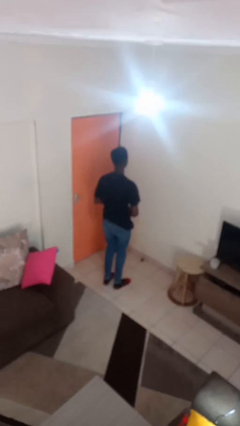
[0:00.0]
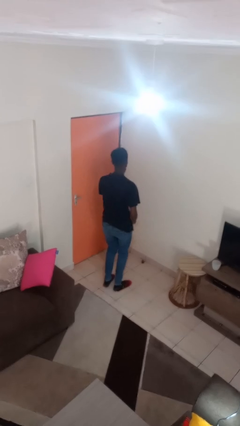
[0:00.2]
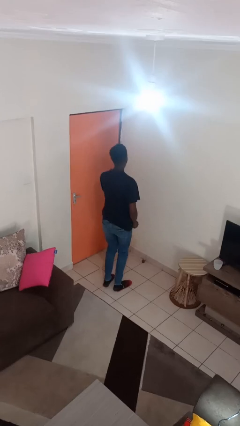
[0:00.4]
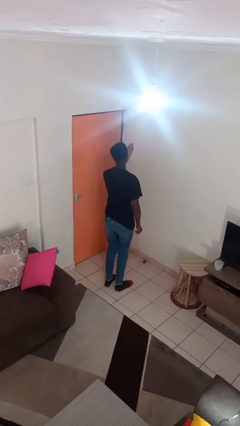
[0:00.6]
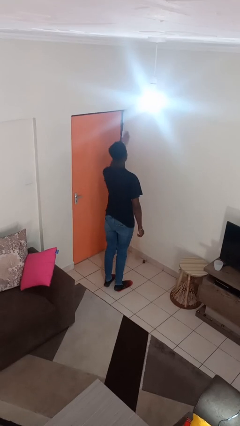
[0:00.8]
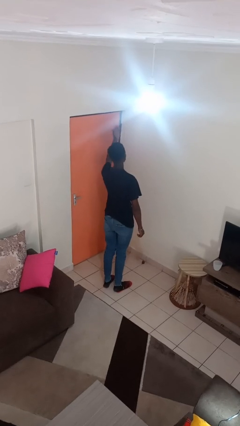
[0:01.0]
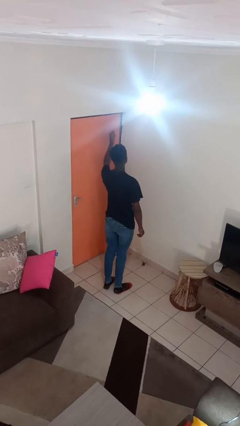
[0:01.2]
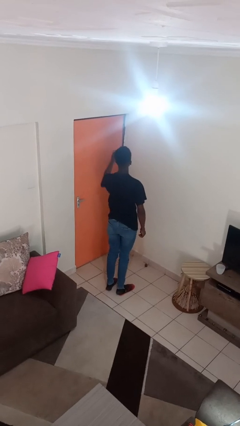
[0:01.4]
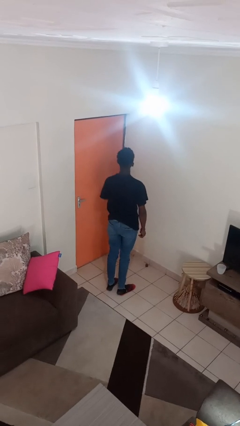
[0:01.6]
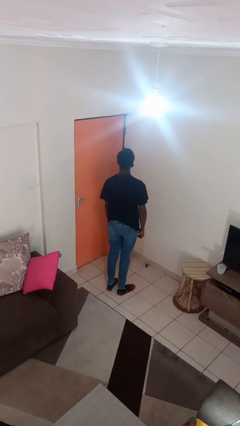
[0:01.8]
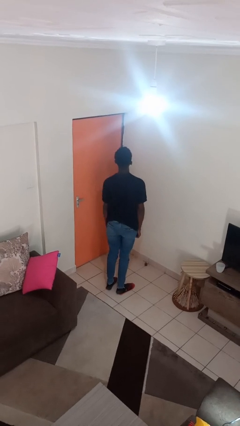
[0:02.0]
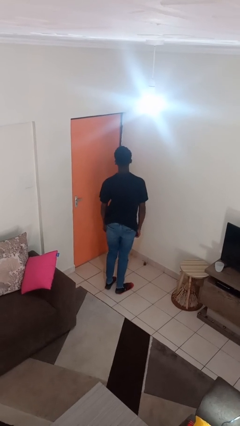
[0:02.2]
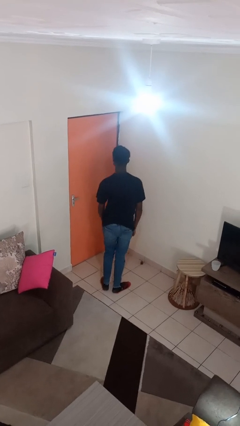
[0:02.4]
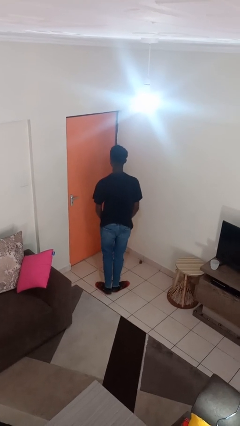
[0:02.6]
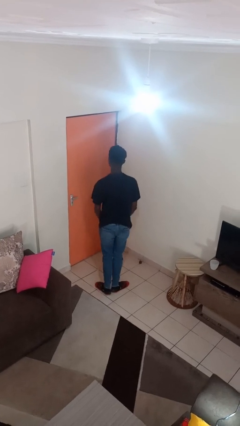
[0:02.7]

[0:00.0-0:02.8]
person gestures blow kiss

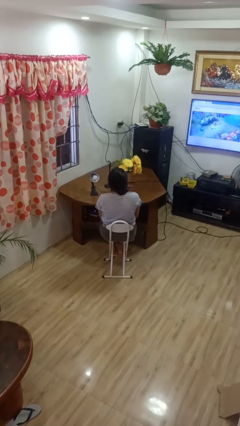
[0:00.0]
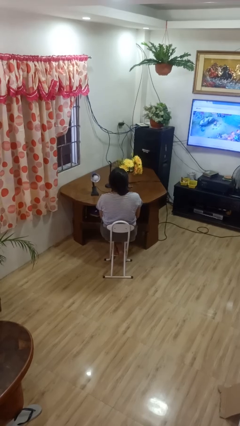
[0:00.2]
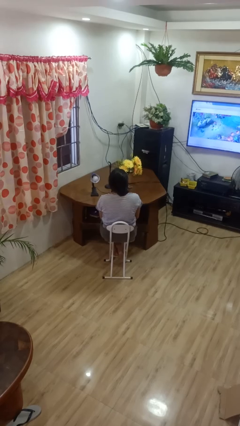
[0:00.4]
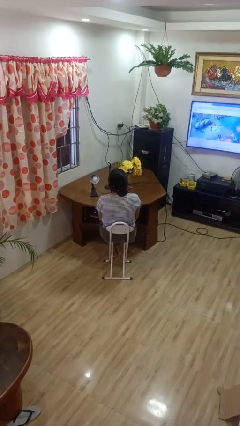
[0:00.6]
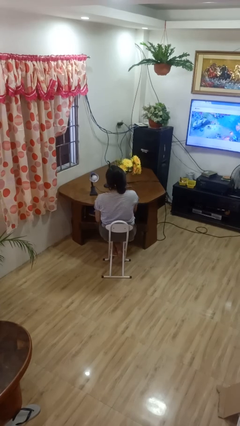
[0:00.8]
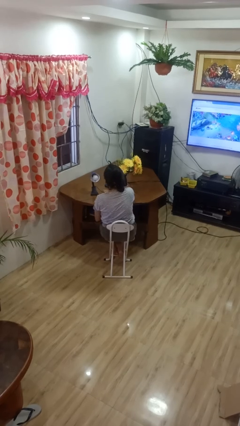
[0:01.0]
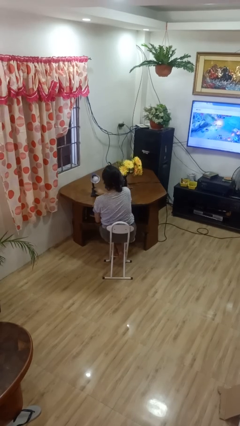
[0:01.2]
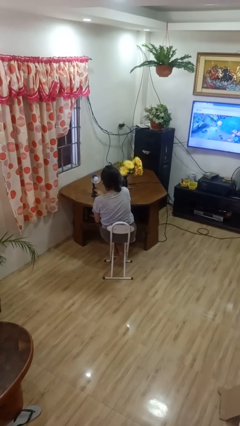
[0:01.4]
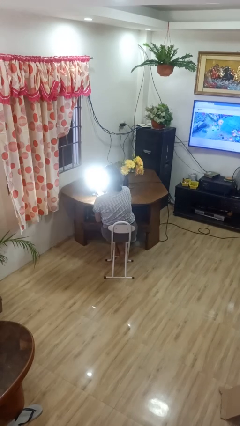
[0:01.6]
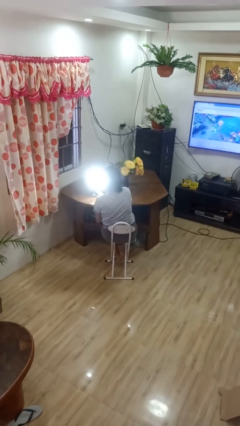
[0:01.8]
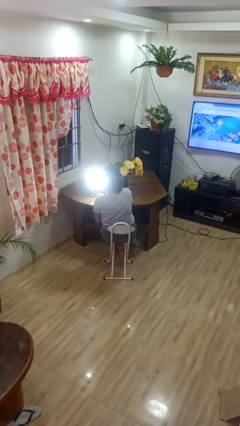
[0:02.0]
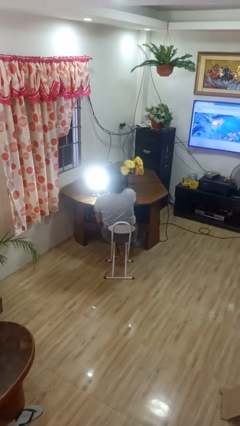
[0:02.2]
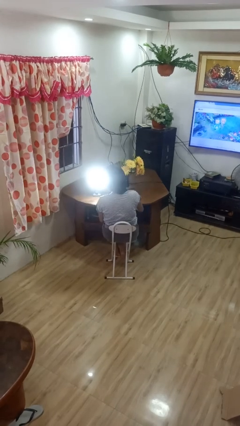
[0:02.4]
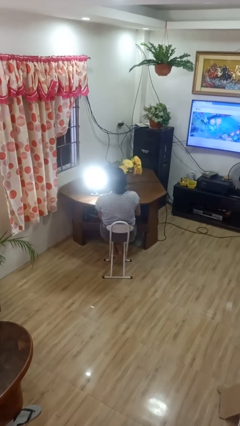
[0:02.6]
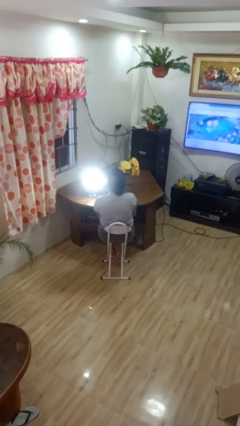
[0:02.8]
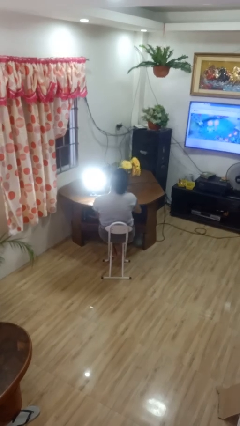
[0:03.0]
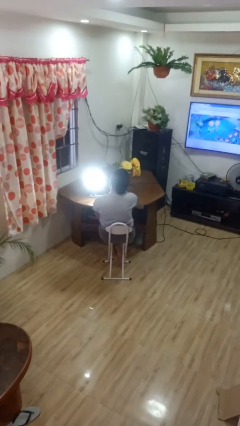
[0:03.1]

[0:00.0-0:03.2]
person turns on lamp

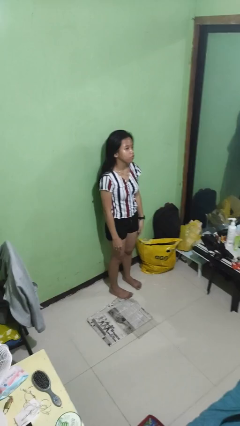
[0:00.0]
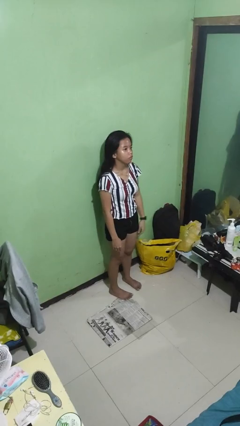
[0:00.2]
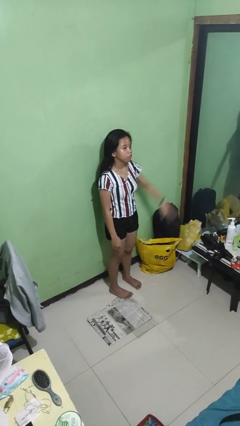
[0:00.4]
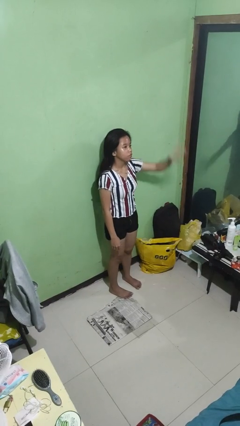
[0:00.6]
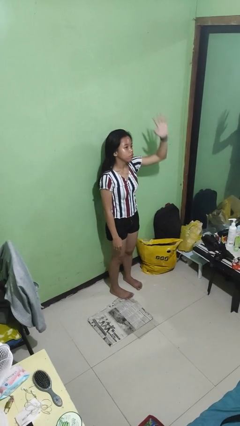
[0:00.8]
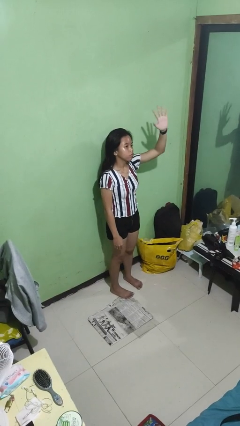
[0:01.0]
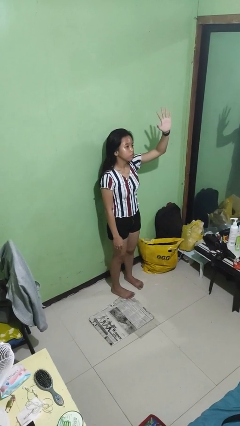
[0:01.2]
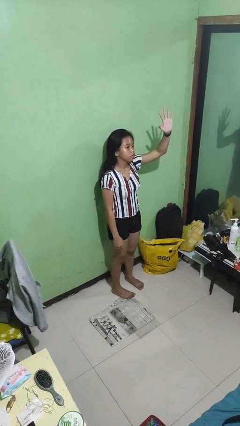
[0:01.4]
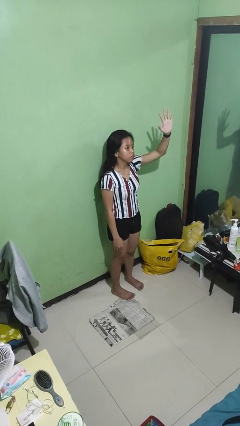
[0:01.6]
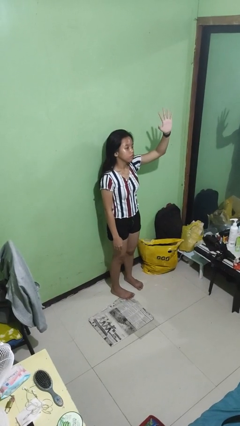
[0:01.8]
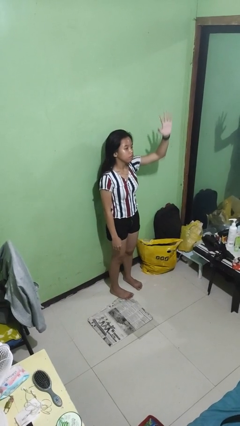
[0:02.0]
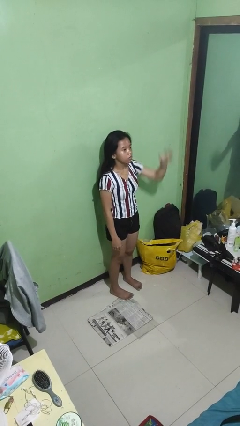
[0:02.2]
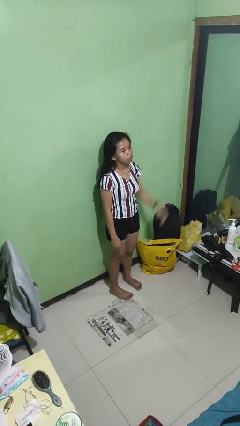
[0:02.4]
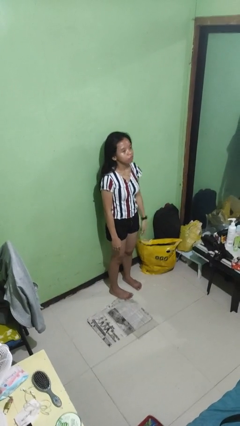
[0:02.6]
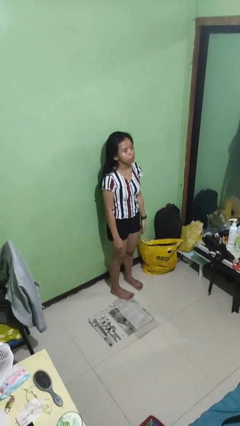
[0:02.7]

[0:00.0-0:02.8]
person gestures number five

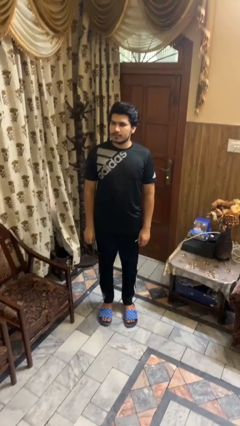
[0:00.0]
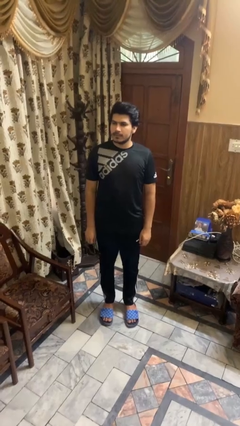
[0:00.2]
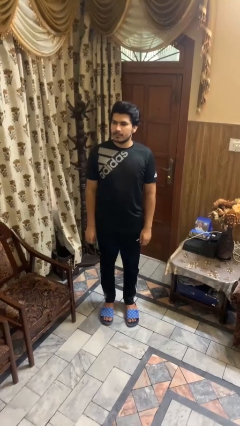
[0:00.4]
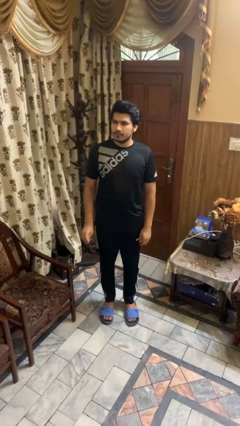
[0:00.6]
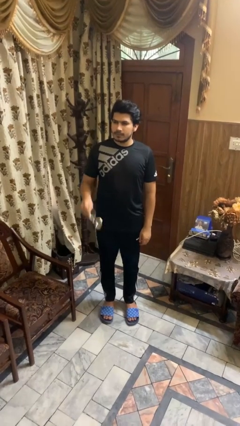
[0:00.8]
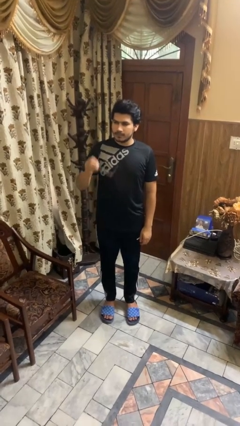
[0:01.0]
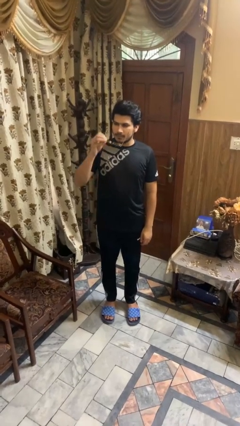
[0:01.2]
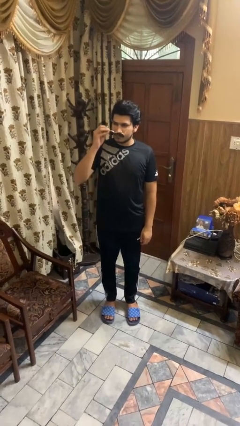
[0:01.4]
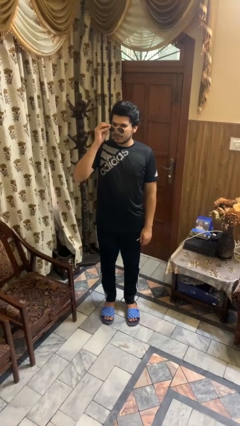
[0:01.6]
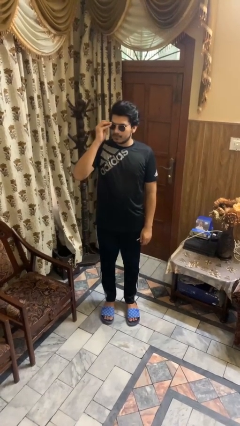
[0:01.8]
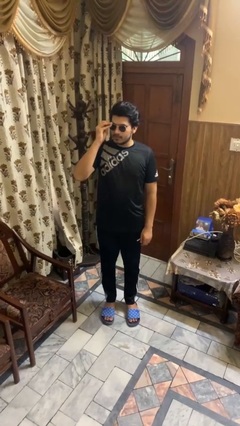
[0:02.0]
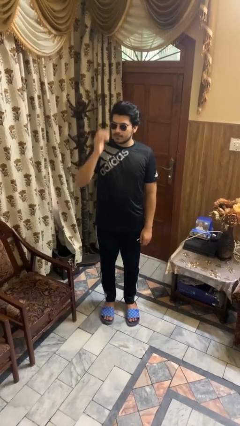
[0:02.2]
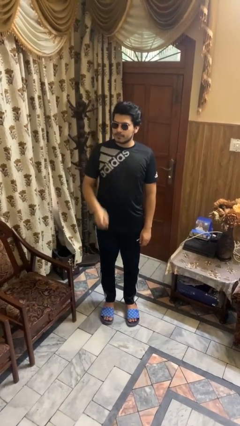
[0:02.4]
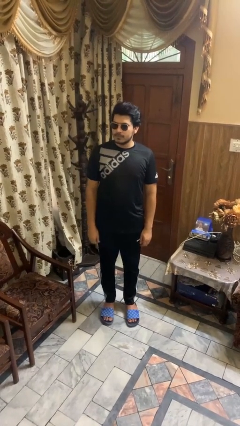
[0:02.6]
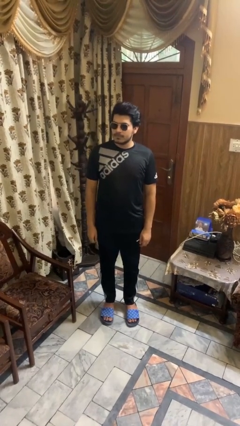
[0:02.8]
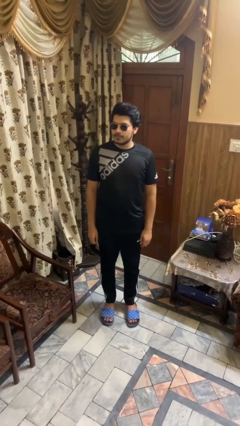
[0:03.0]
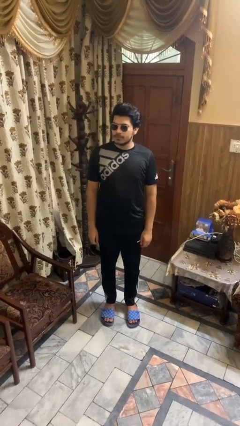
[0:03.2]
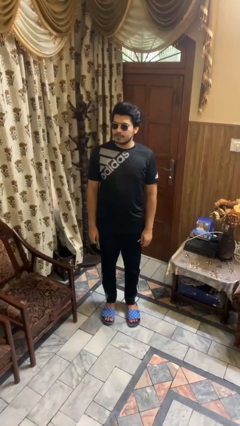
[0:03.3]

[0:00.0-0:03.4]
person puts on sunglasses

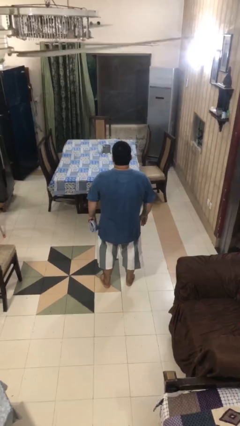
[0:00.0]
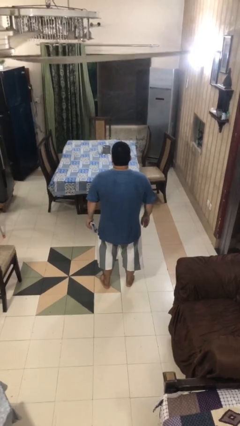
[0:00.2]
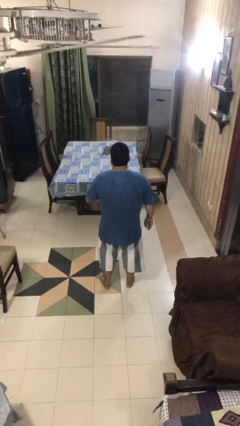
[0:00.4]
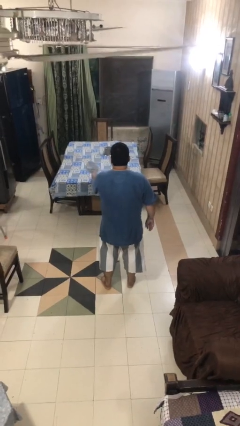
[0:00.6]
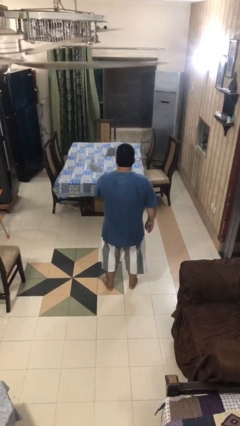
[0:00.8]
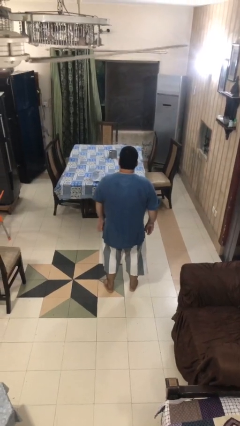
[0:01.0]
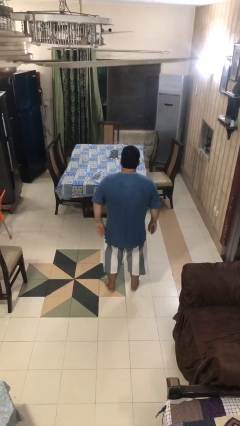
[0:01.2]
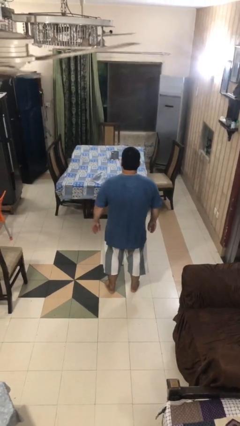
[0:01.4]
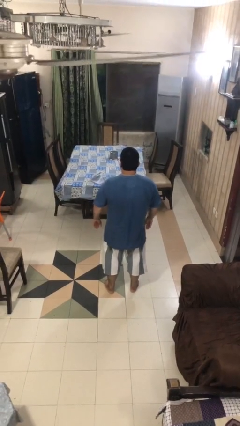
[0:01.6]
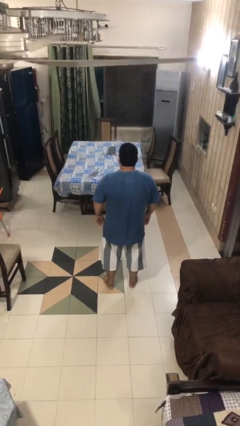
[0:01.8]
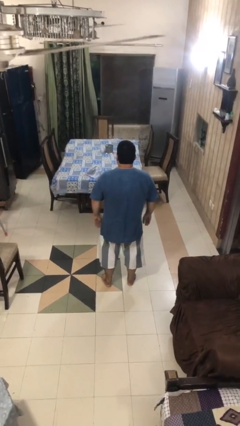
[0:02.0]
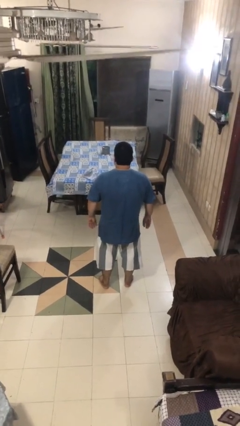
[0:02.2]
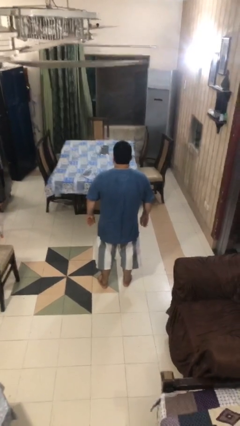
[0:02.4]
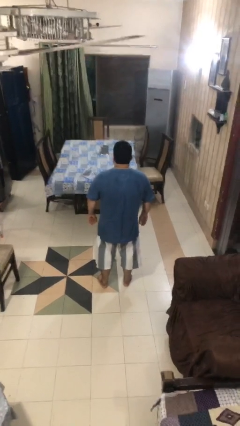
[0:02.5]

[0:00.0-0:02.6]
person throws object on table

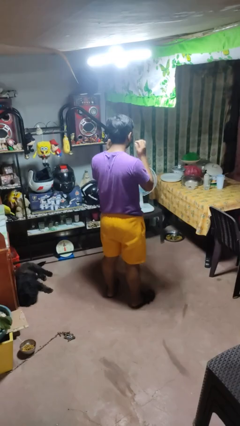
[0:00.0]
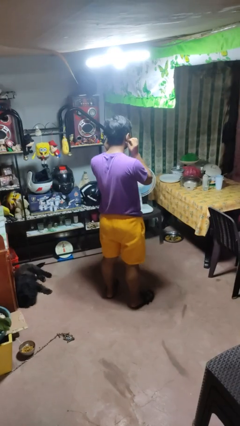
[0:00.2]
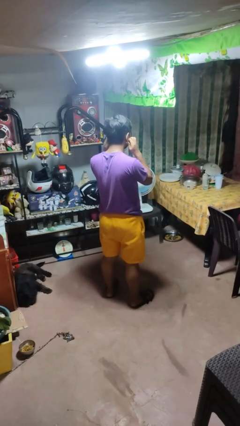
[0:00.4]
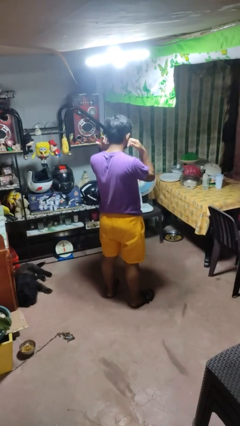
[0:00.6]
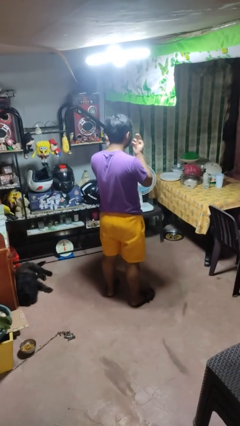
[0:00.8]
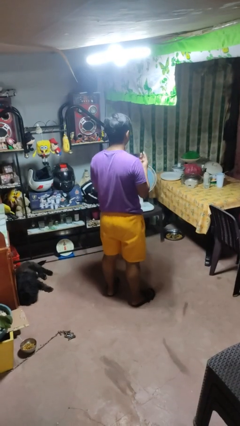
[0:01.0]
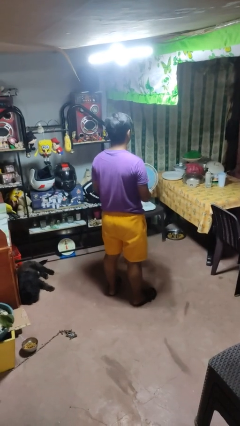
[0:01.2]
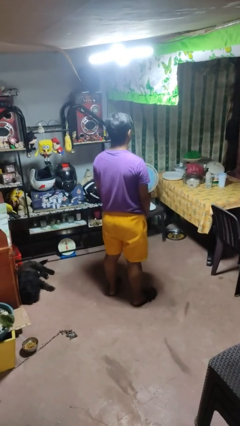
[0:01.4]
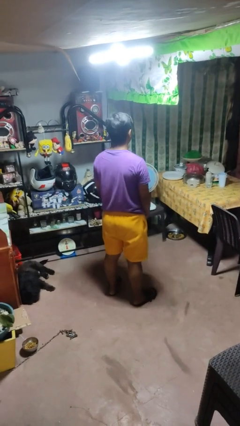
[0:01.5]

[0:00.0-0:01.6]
person takes off facemask

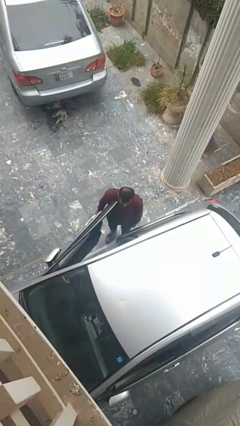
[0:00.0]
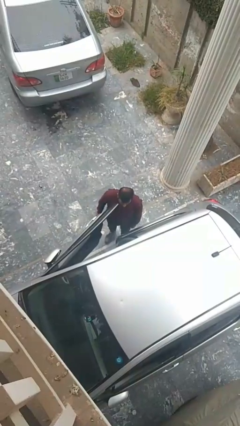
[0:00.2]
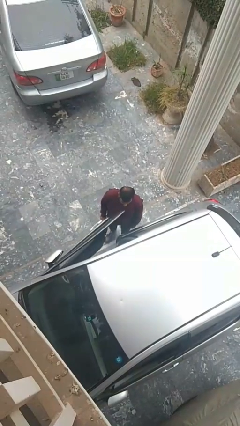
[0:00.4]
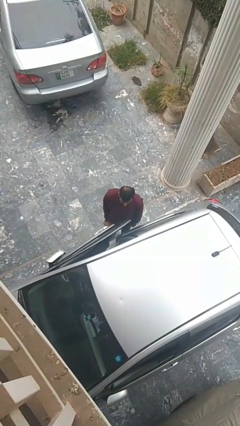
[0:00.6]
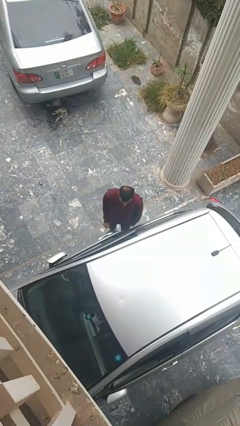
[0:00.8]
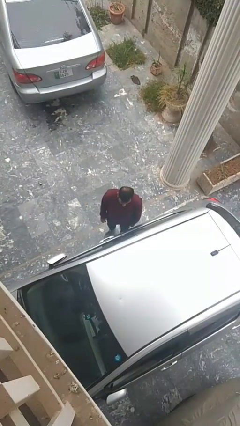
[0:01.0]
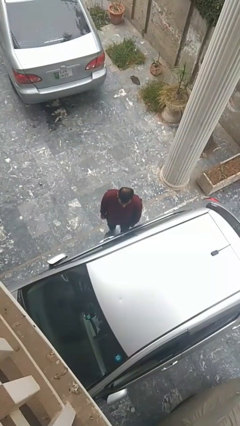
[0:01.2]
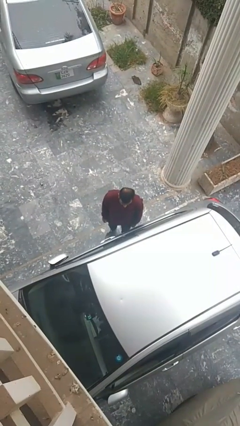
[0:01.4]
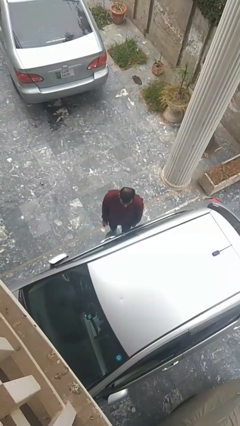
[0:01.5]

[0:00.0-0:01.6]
person closes car door
